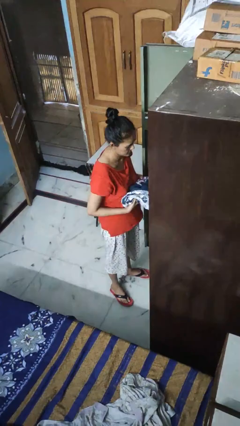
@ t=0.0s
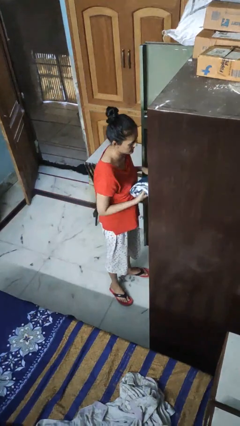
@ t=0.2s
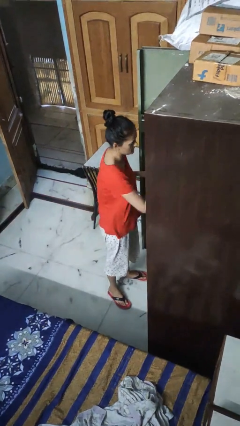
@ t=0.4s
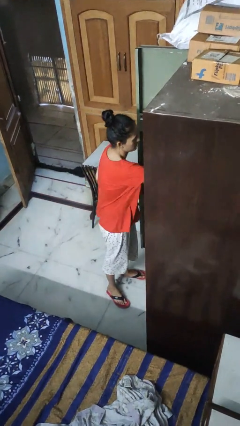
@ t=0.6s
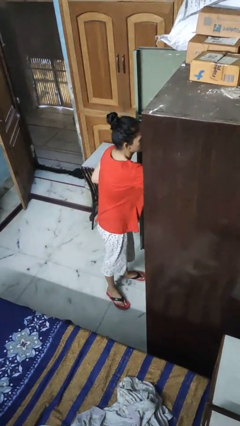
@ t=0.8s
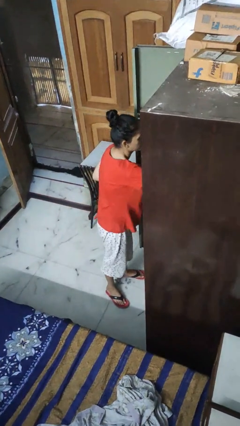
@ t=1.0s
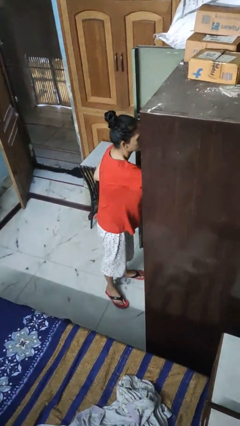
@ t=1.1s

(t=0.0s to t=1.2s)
person puts clothes into dresser

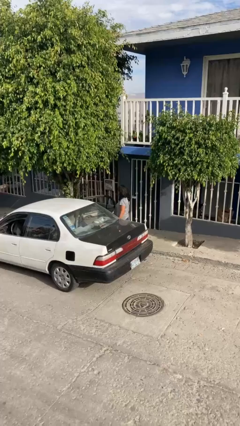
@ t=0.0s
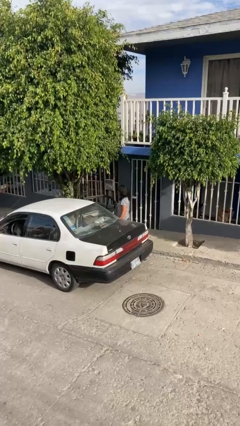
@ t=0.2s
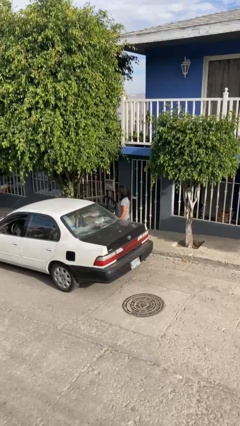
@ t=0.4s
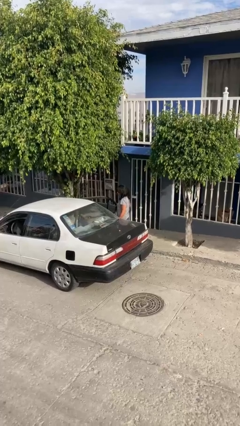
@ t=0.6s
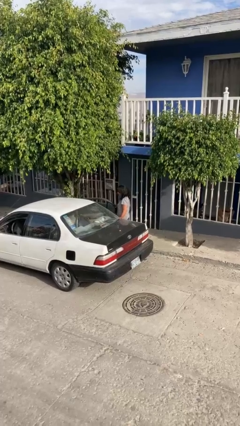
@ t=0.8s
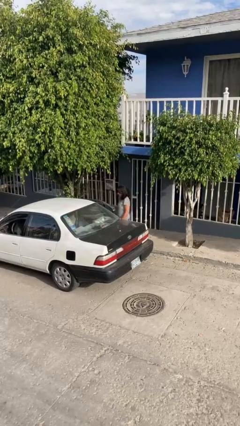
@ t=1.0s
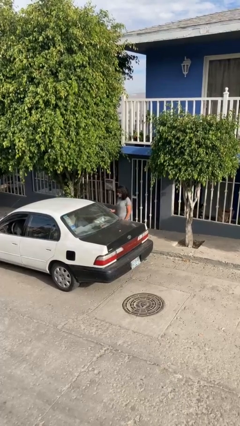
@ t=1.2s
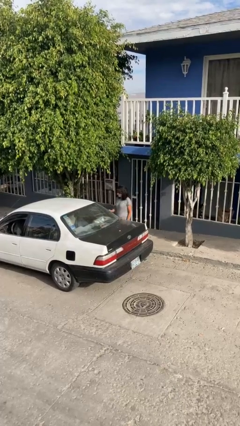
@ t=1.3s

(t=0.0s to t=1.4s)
person closes car door

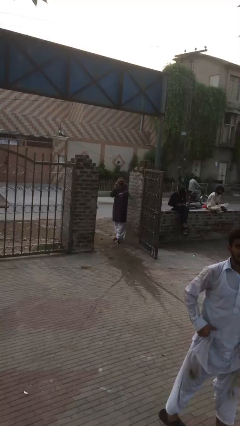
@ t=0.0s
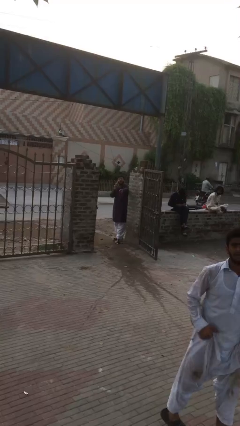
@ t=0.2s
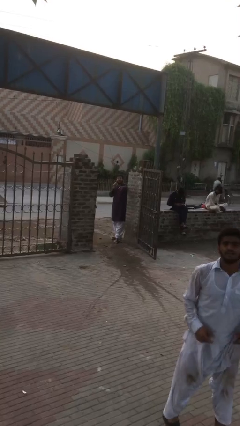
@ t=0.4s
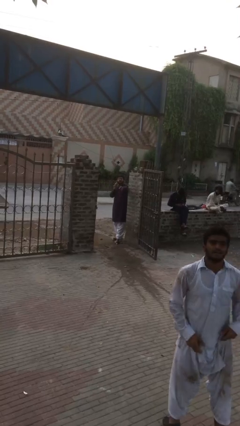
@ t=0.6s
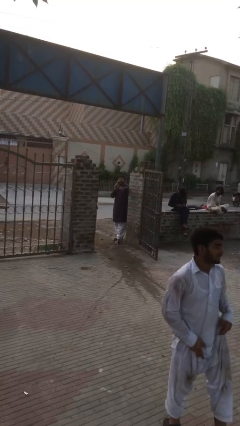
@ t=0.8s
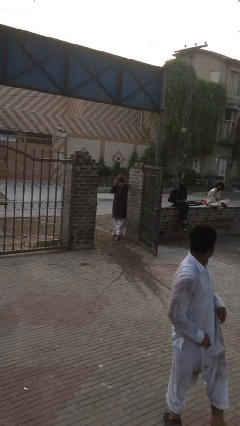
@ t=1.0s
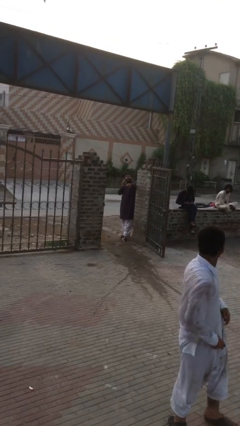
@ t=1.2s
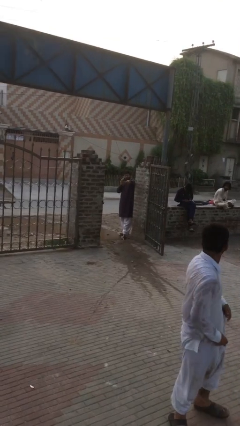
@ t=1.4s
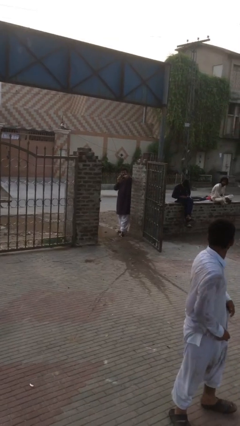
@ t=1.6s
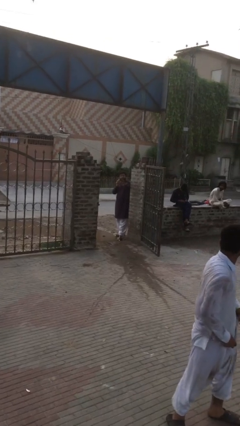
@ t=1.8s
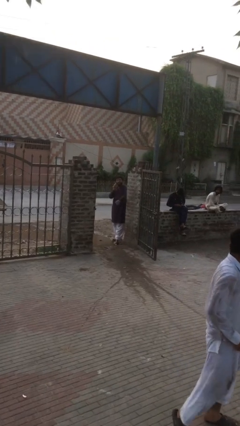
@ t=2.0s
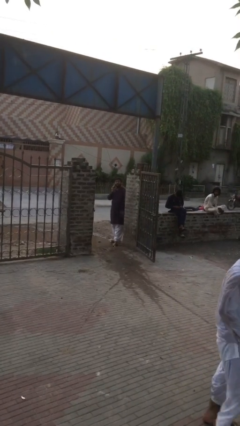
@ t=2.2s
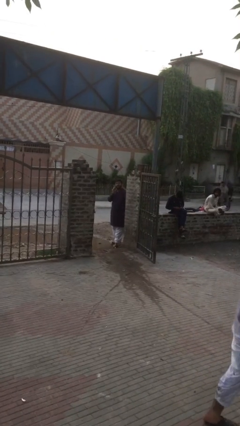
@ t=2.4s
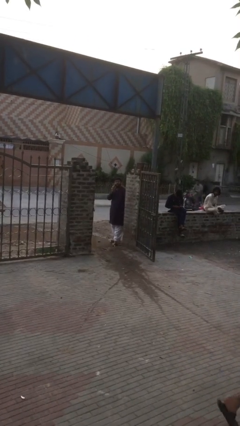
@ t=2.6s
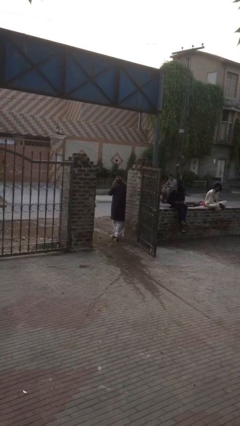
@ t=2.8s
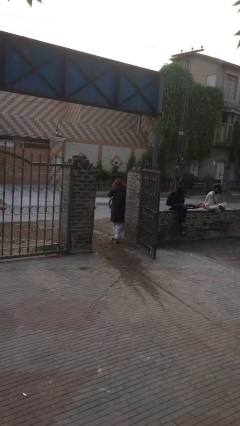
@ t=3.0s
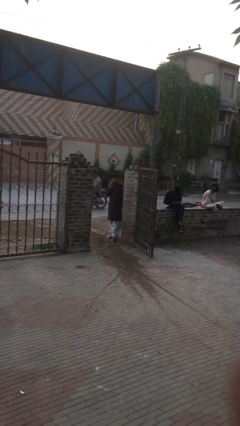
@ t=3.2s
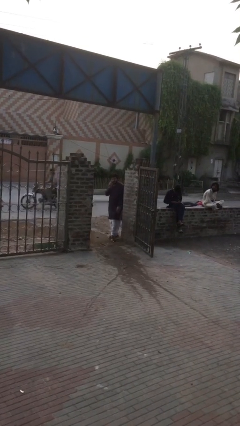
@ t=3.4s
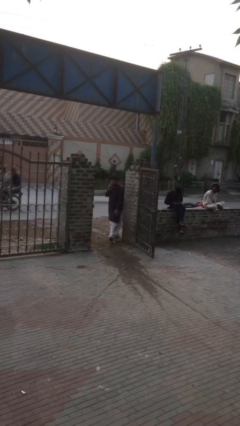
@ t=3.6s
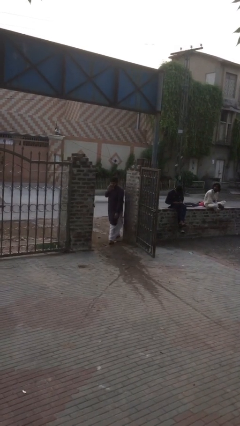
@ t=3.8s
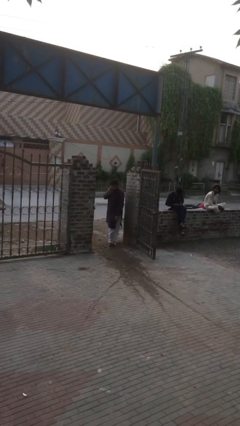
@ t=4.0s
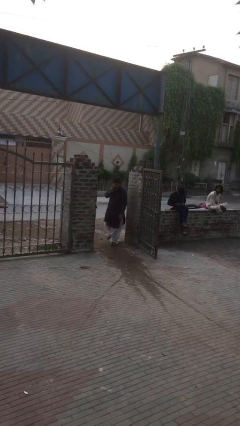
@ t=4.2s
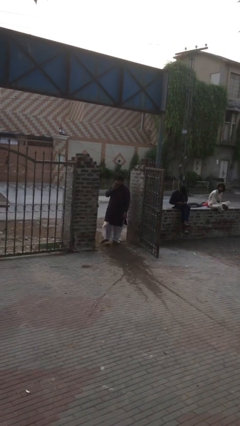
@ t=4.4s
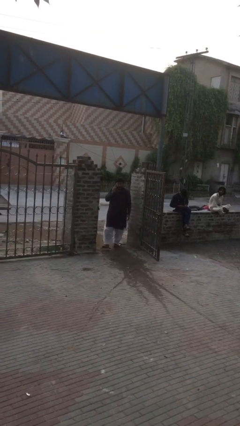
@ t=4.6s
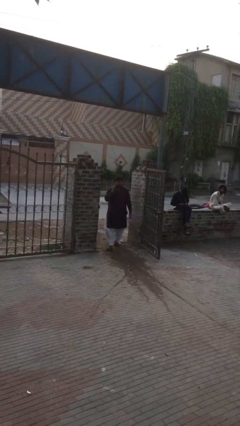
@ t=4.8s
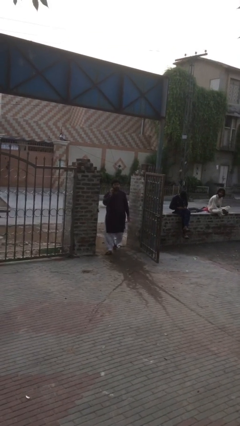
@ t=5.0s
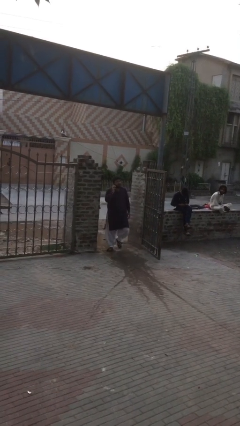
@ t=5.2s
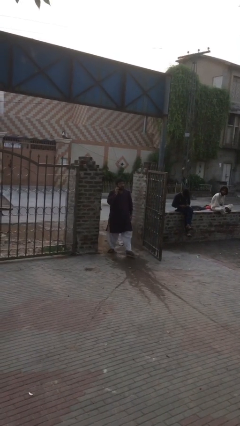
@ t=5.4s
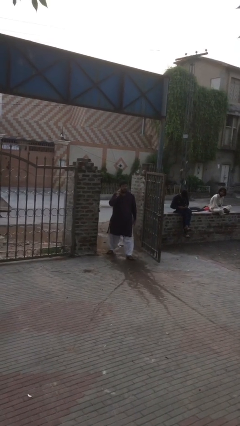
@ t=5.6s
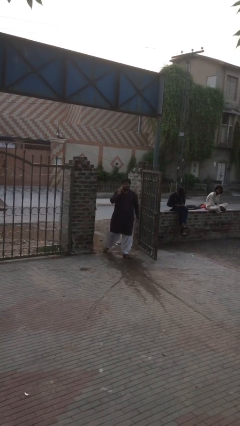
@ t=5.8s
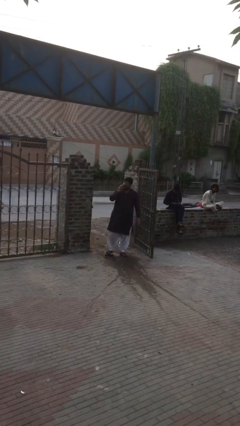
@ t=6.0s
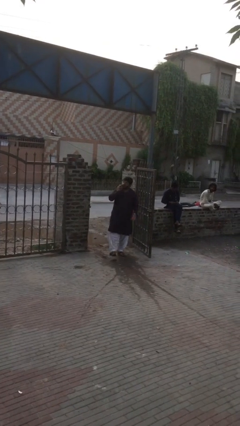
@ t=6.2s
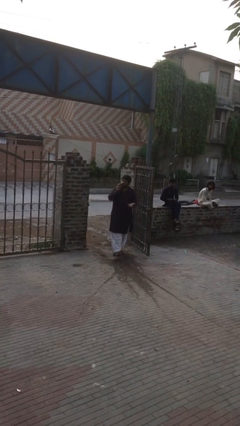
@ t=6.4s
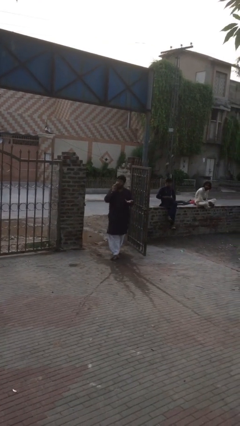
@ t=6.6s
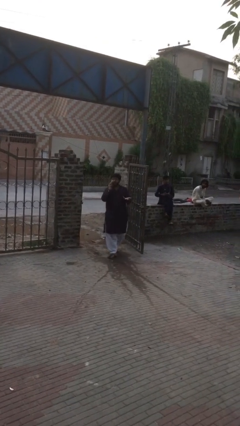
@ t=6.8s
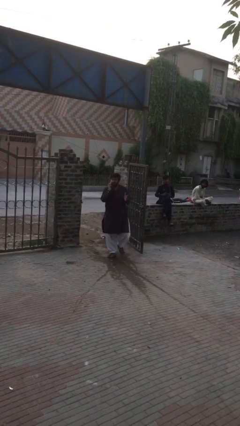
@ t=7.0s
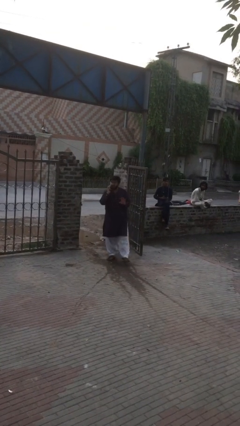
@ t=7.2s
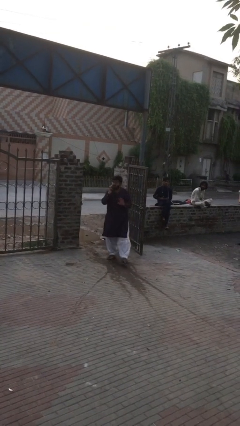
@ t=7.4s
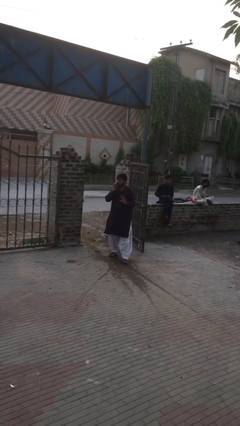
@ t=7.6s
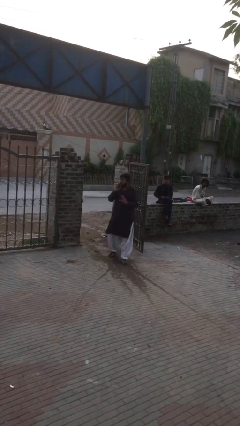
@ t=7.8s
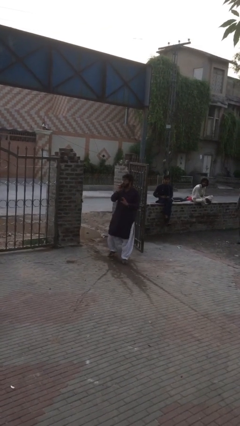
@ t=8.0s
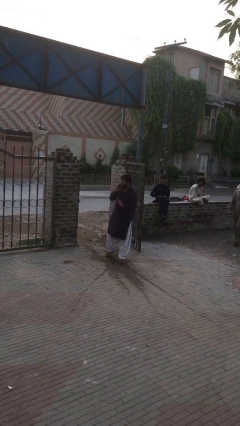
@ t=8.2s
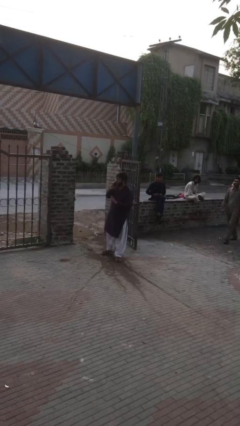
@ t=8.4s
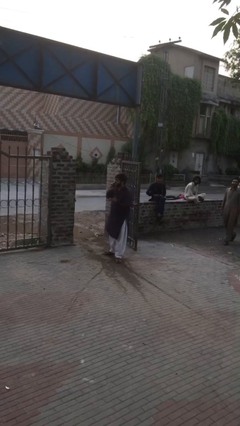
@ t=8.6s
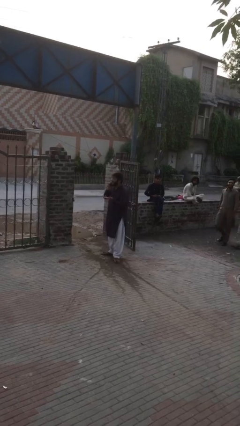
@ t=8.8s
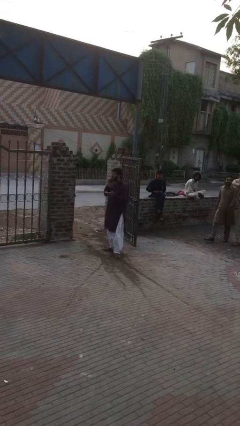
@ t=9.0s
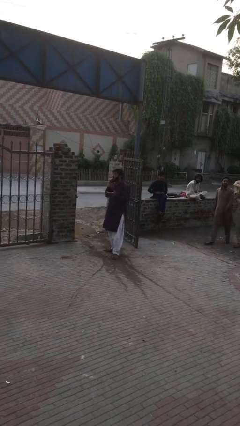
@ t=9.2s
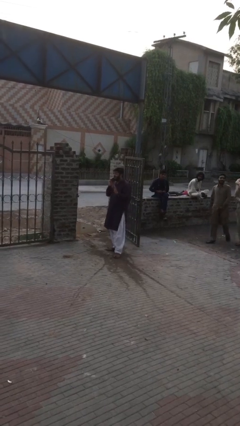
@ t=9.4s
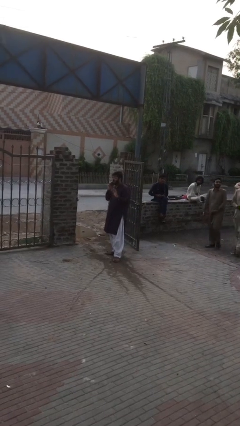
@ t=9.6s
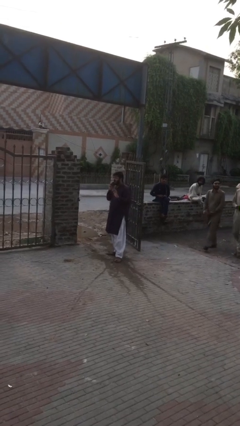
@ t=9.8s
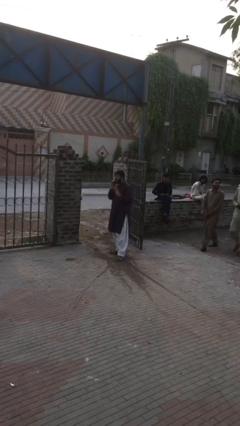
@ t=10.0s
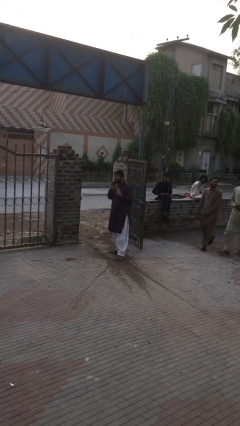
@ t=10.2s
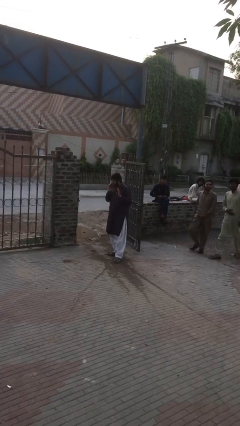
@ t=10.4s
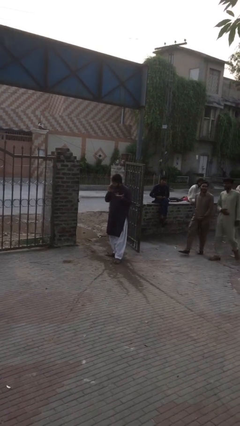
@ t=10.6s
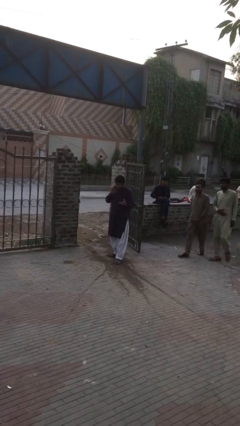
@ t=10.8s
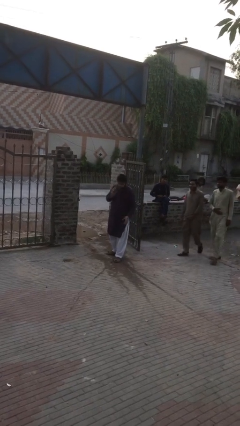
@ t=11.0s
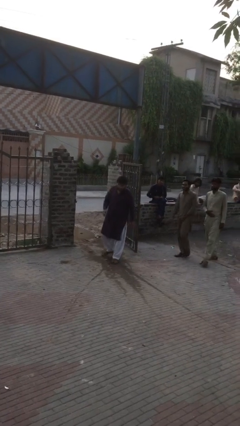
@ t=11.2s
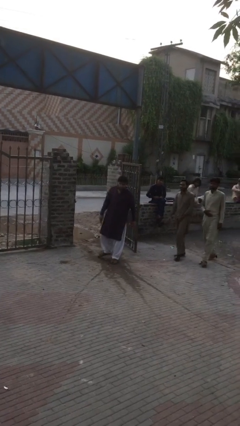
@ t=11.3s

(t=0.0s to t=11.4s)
person enters scene through structure

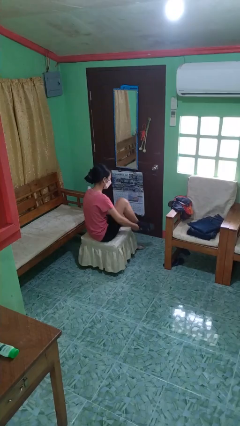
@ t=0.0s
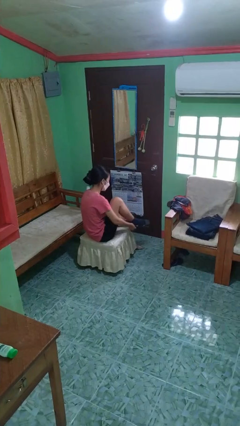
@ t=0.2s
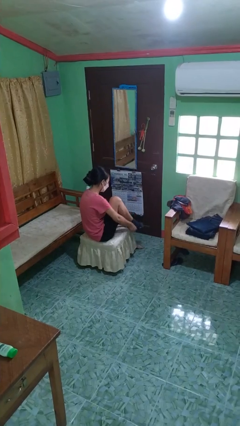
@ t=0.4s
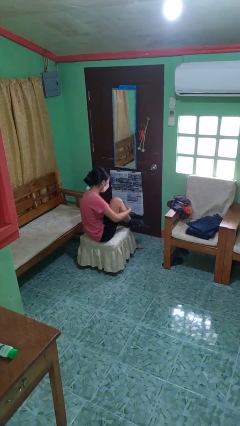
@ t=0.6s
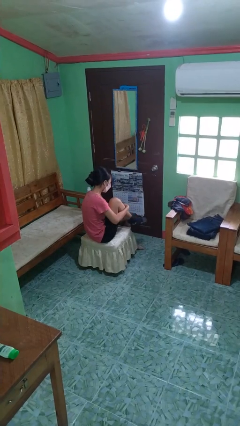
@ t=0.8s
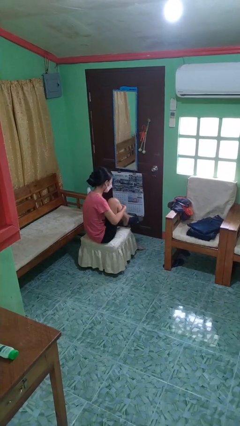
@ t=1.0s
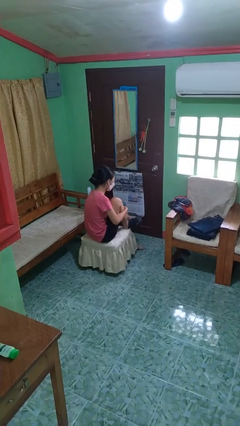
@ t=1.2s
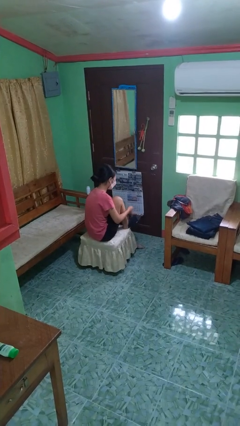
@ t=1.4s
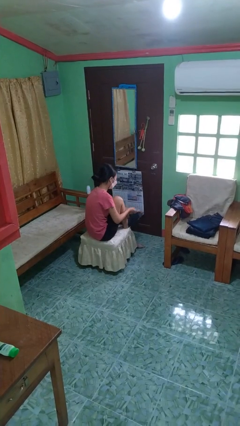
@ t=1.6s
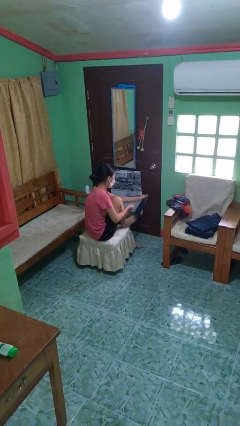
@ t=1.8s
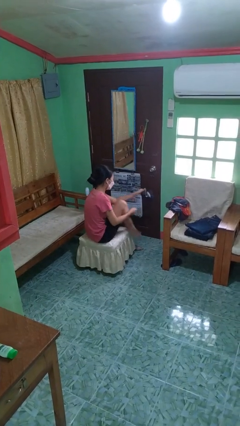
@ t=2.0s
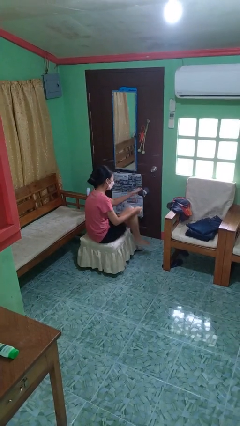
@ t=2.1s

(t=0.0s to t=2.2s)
person takes off socks

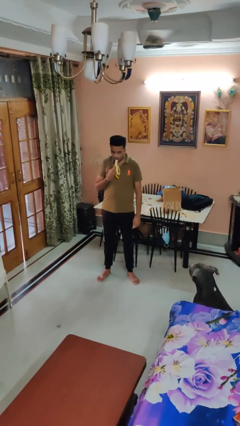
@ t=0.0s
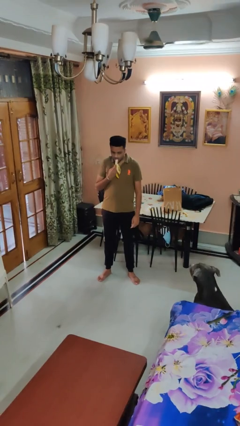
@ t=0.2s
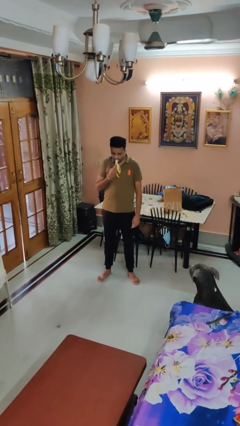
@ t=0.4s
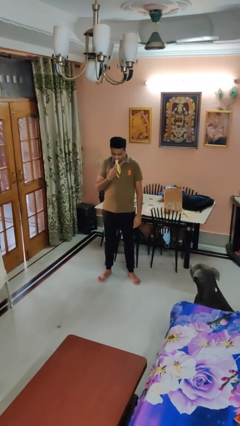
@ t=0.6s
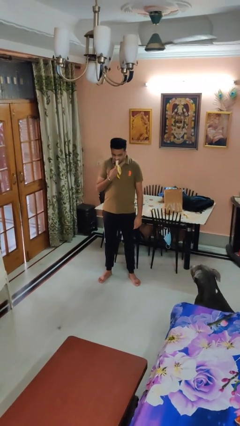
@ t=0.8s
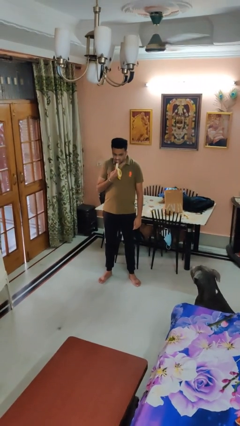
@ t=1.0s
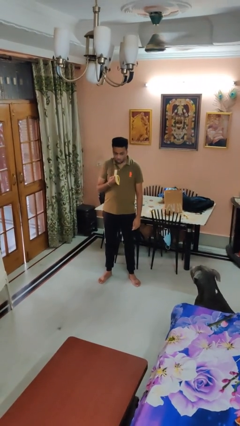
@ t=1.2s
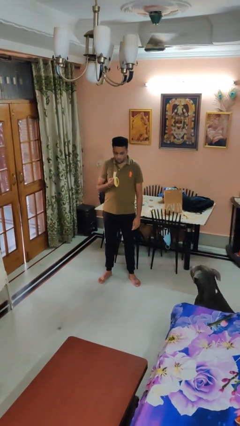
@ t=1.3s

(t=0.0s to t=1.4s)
person eats banana
